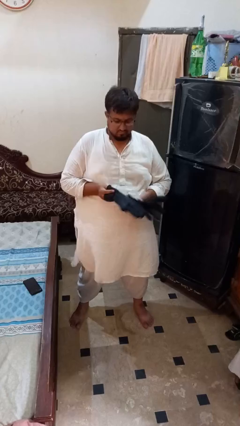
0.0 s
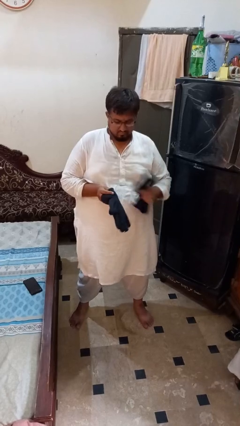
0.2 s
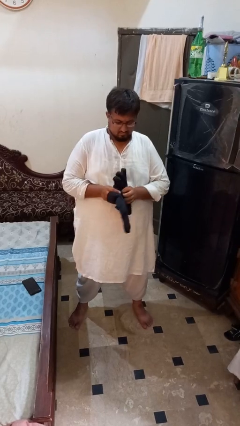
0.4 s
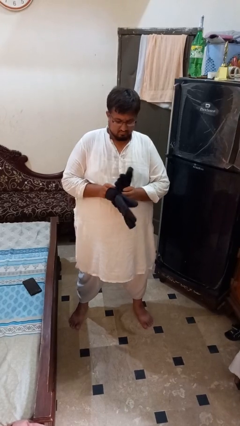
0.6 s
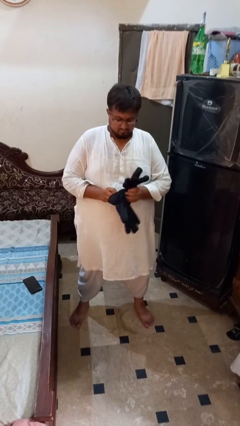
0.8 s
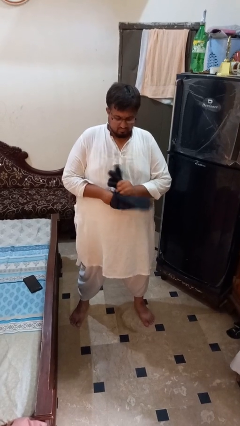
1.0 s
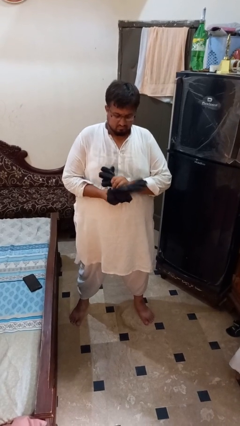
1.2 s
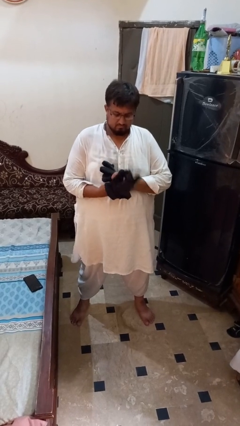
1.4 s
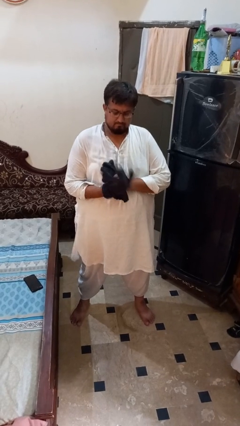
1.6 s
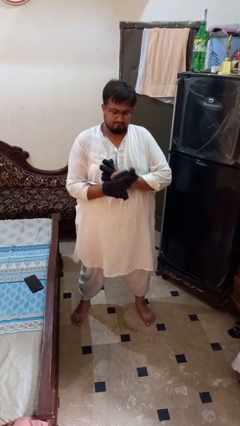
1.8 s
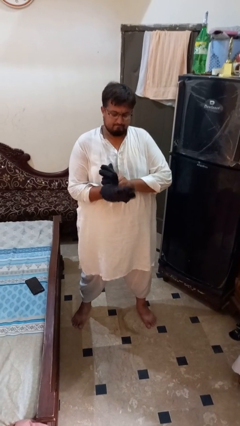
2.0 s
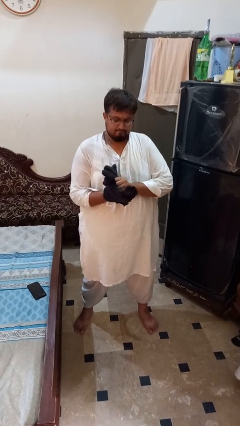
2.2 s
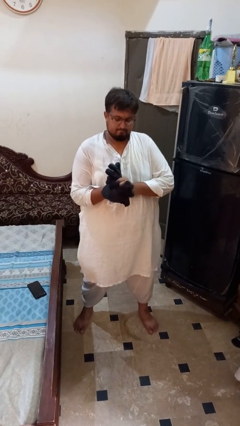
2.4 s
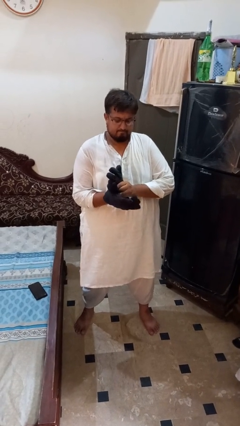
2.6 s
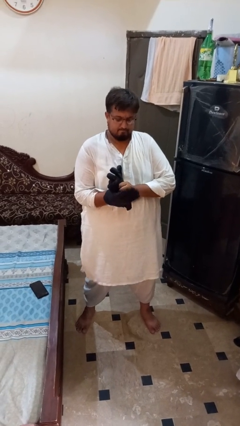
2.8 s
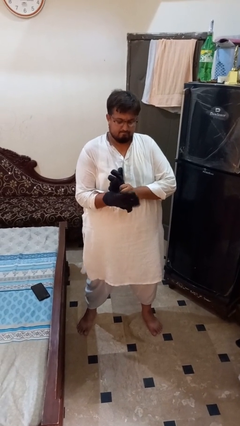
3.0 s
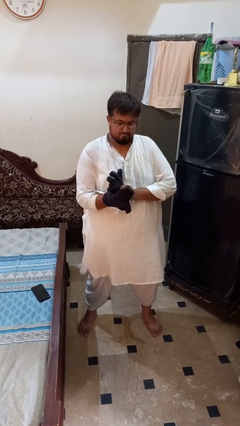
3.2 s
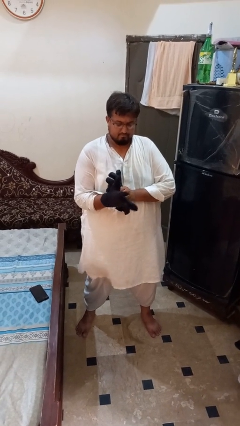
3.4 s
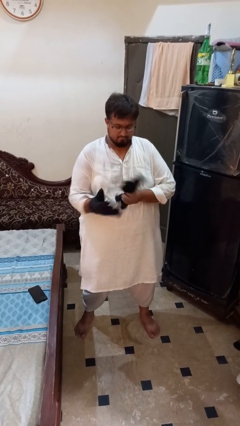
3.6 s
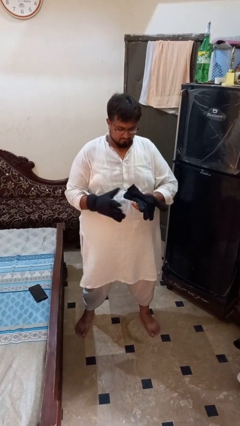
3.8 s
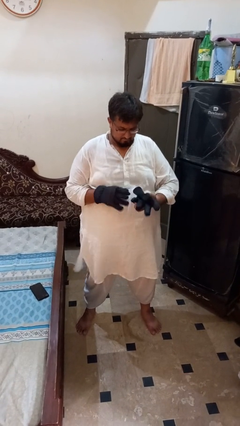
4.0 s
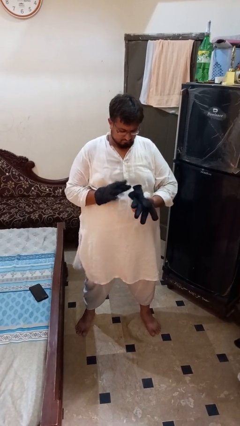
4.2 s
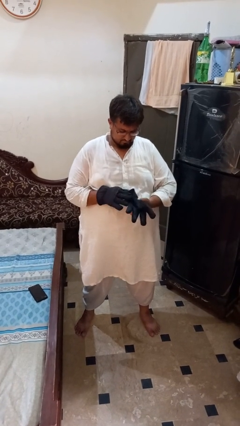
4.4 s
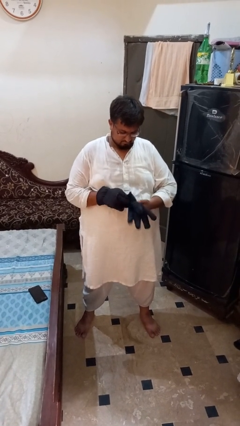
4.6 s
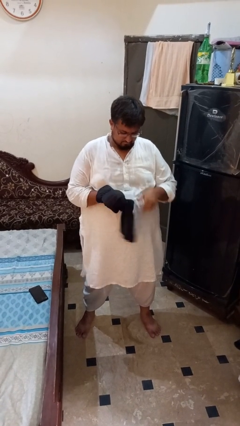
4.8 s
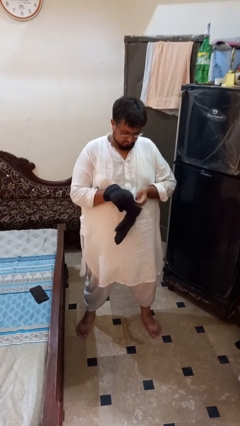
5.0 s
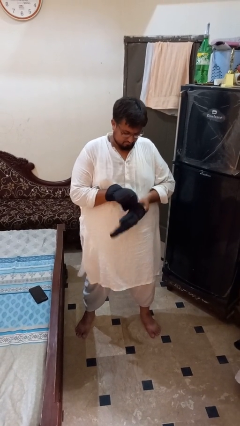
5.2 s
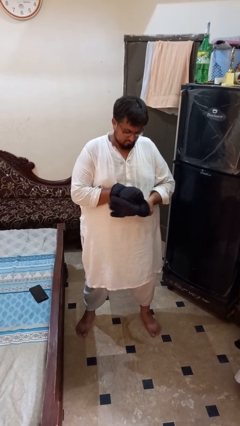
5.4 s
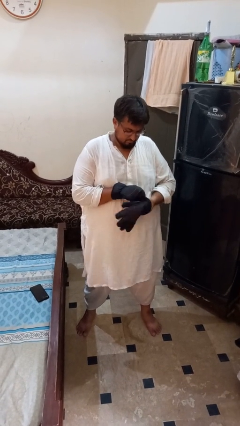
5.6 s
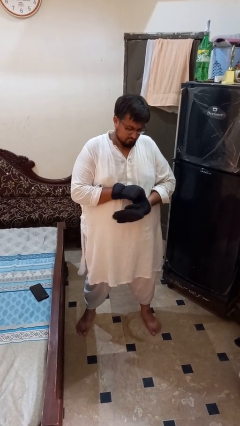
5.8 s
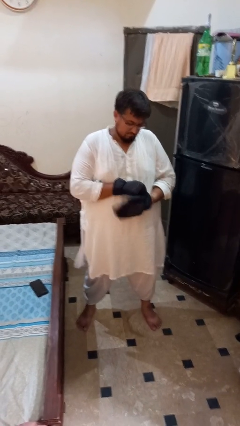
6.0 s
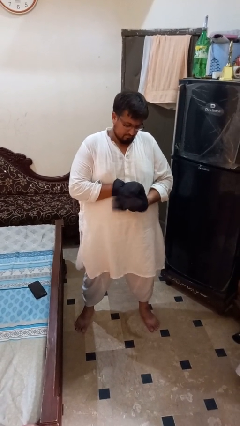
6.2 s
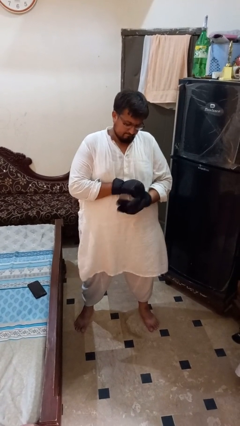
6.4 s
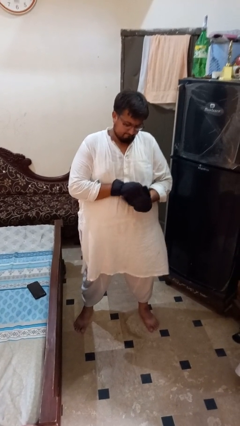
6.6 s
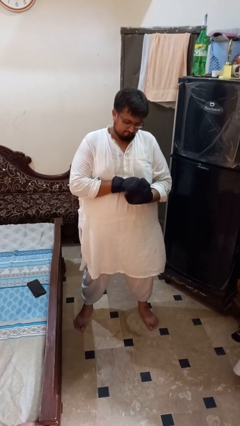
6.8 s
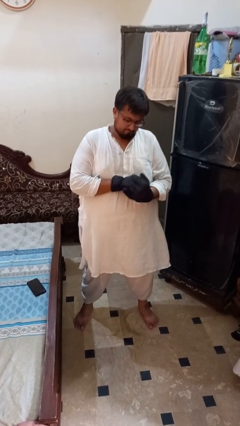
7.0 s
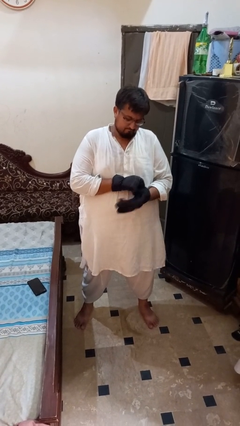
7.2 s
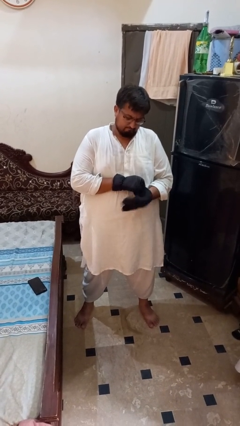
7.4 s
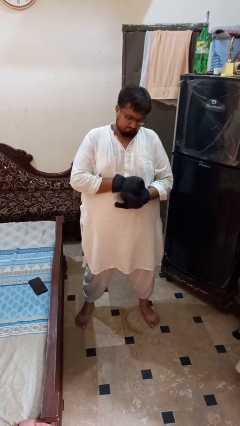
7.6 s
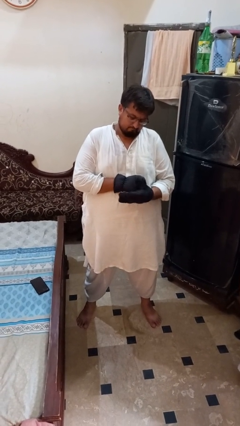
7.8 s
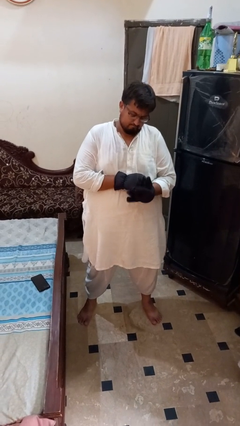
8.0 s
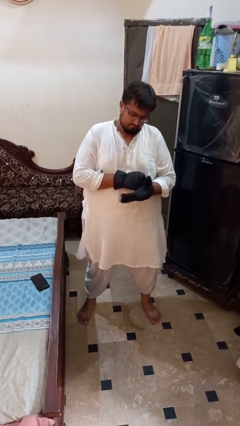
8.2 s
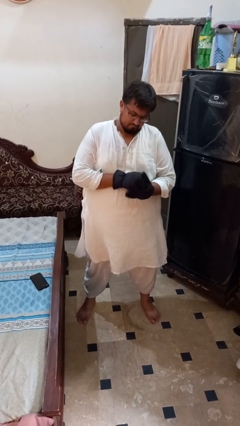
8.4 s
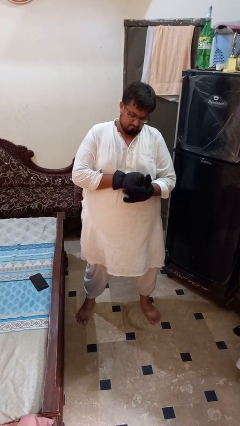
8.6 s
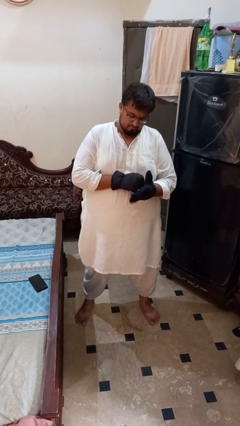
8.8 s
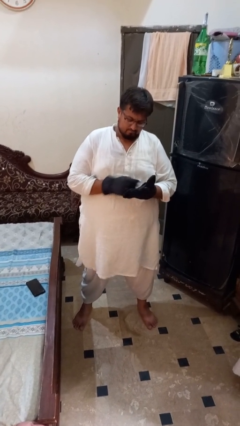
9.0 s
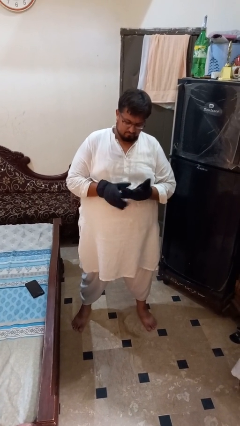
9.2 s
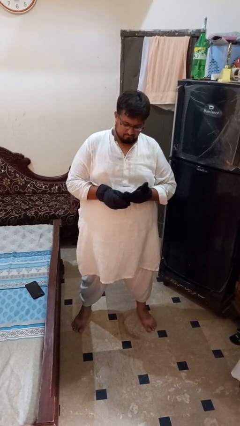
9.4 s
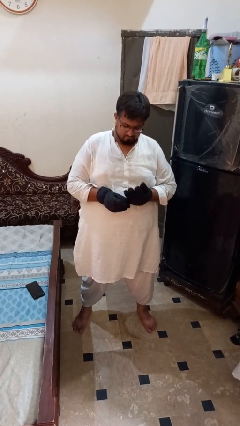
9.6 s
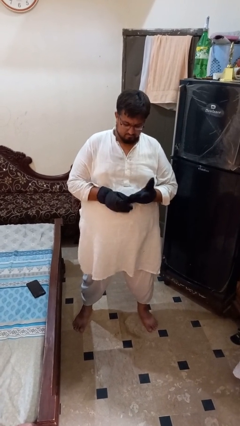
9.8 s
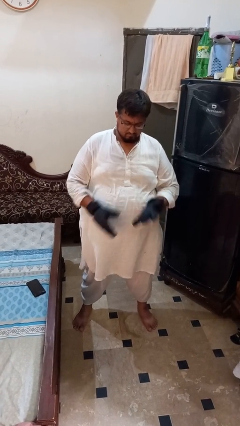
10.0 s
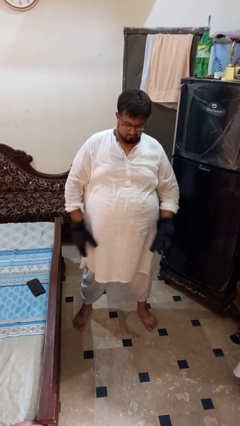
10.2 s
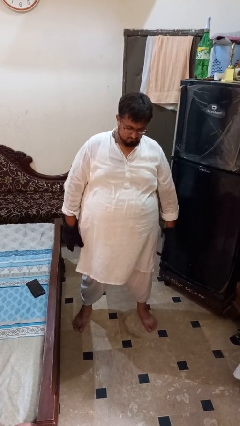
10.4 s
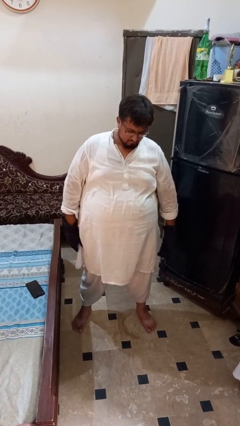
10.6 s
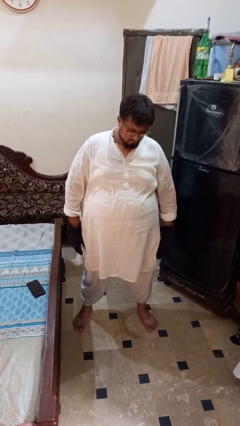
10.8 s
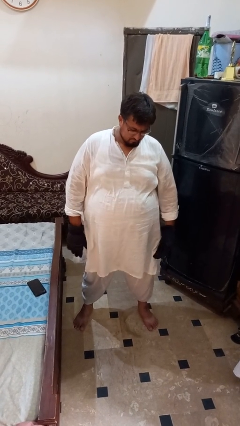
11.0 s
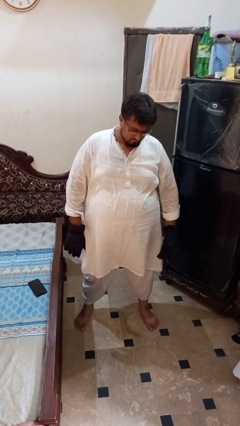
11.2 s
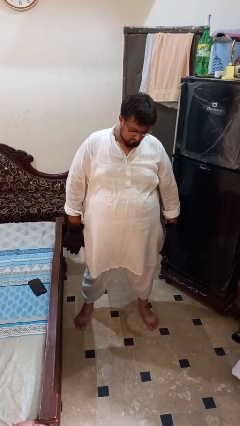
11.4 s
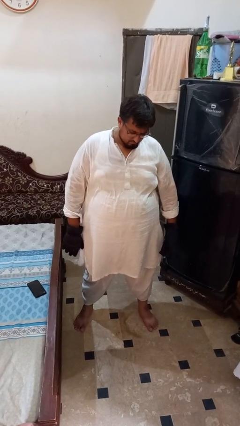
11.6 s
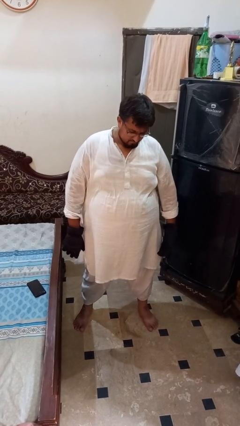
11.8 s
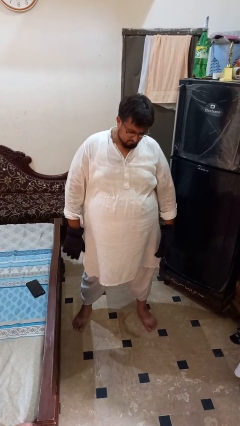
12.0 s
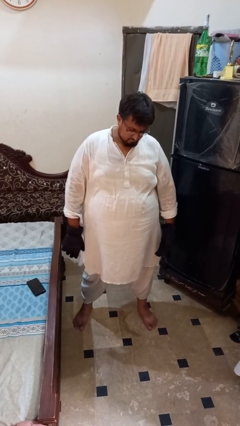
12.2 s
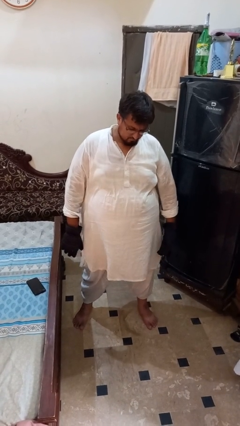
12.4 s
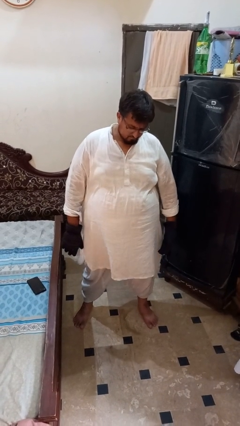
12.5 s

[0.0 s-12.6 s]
person puts on gloves

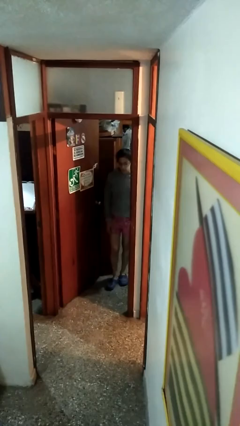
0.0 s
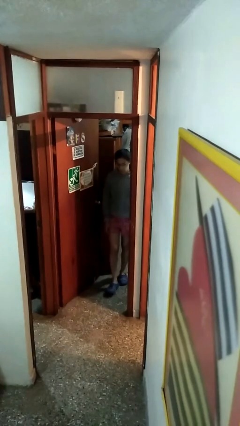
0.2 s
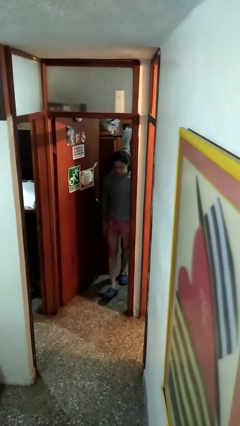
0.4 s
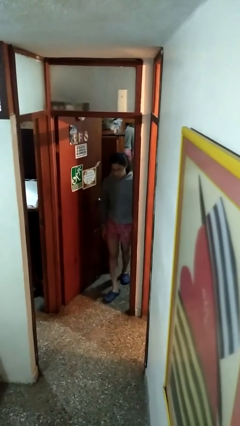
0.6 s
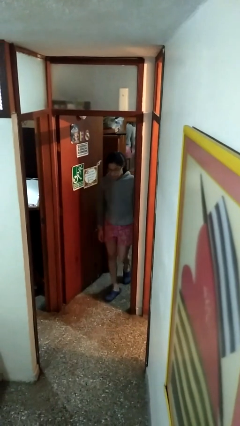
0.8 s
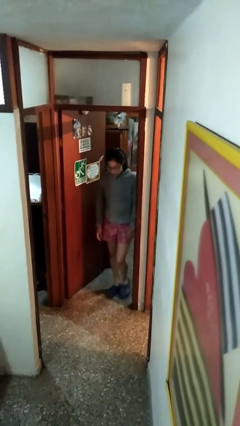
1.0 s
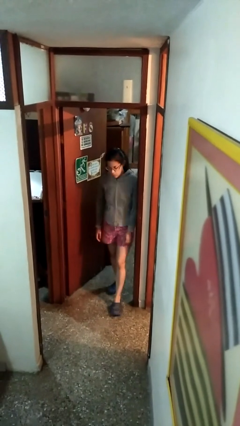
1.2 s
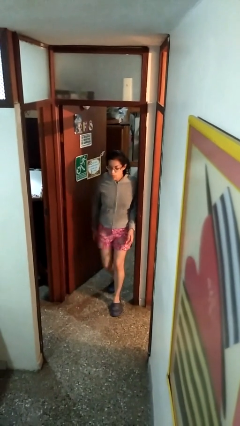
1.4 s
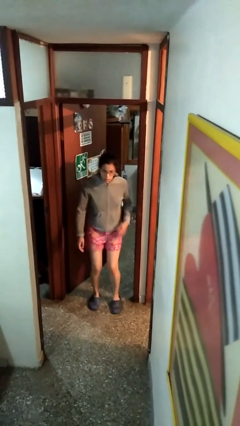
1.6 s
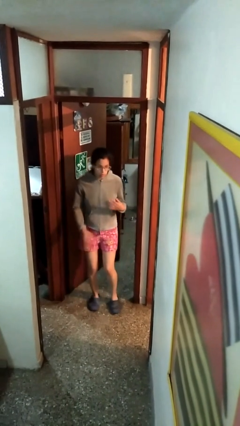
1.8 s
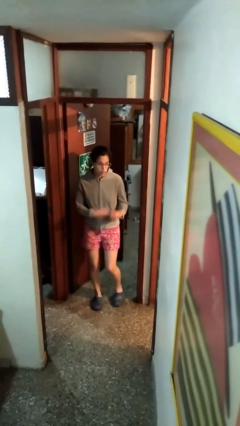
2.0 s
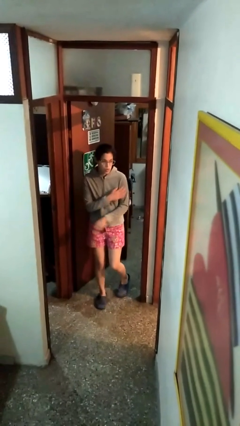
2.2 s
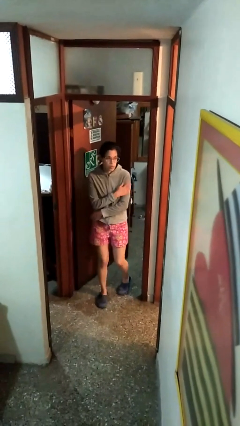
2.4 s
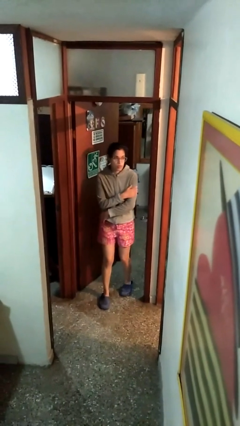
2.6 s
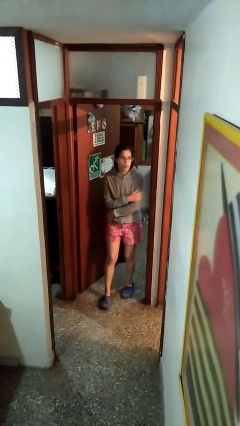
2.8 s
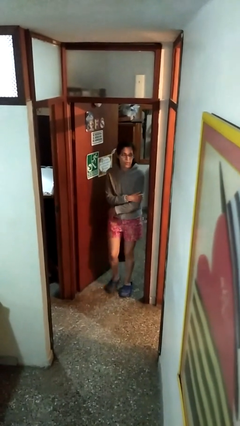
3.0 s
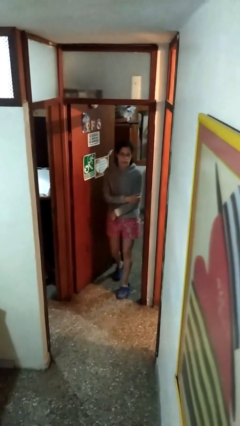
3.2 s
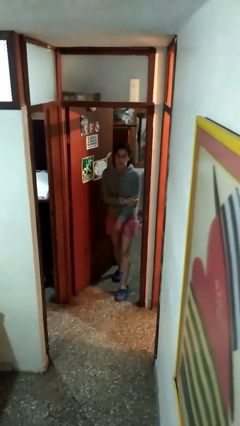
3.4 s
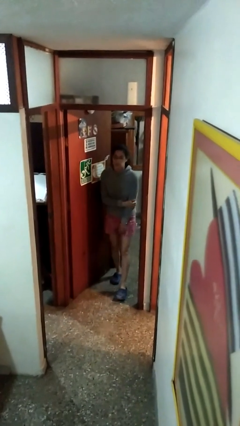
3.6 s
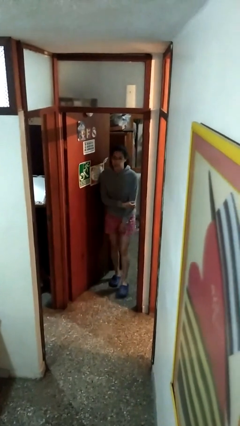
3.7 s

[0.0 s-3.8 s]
person bumps into wall

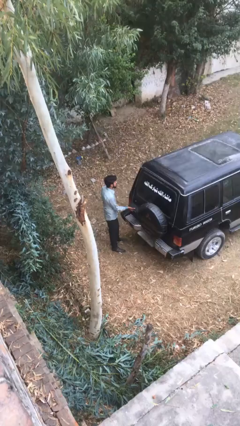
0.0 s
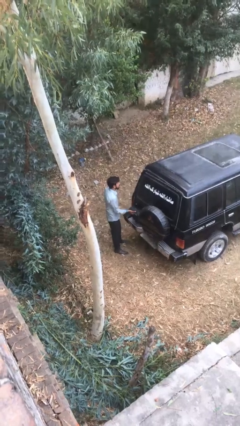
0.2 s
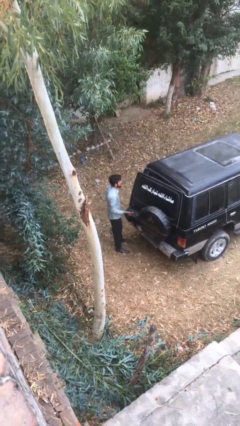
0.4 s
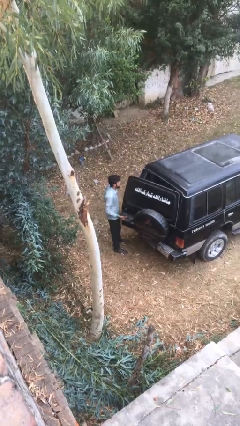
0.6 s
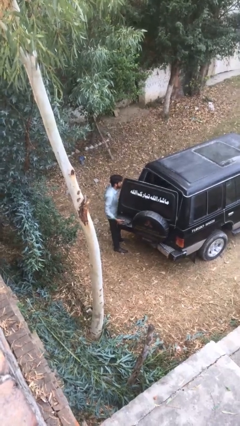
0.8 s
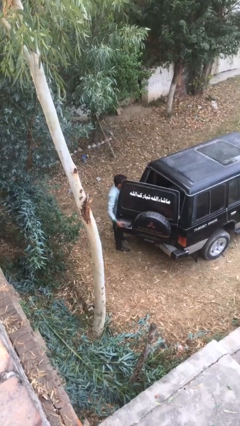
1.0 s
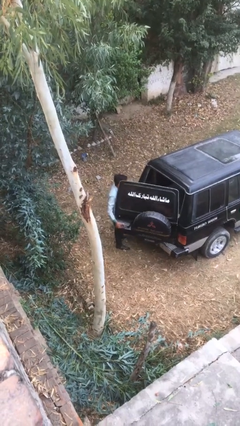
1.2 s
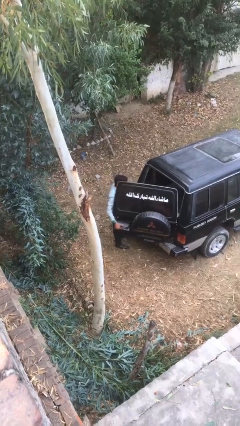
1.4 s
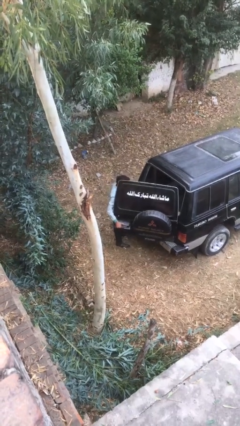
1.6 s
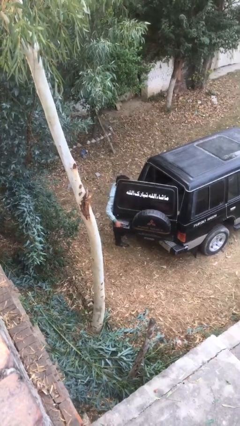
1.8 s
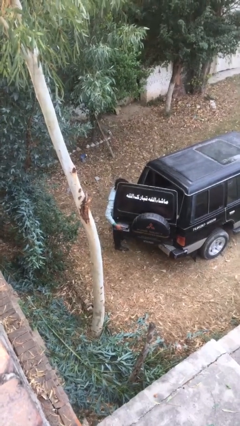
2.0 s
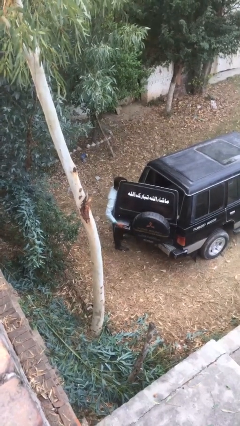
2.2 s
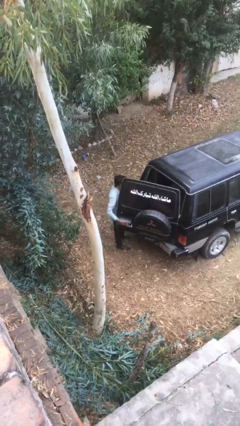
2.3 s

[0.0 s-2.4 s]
person opens car trunk
